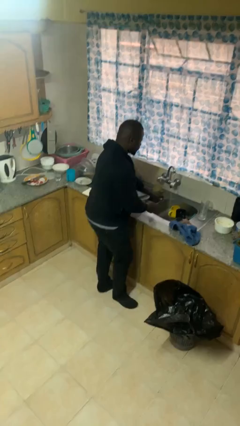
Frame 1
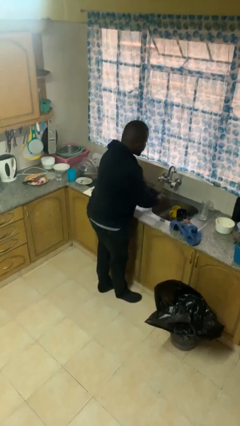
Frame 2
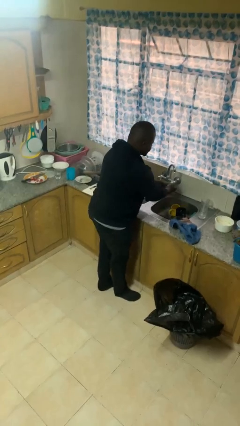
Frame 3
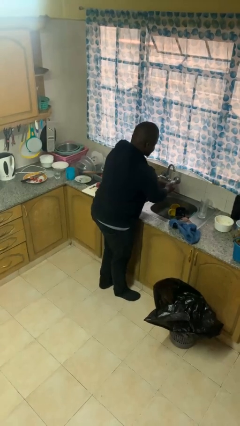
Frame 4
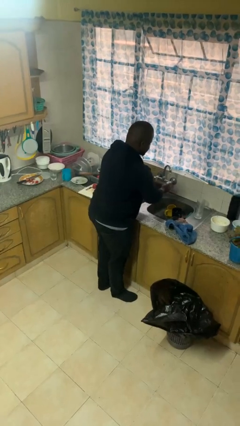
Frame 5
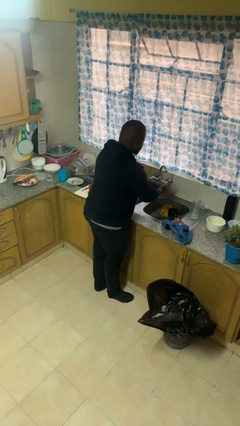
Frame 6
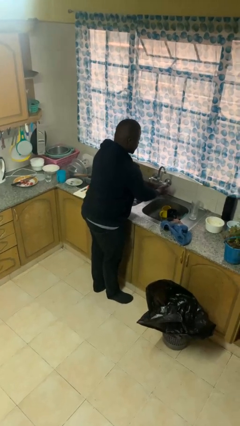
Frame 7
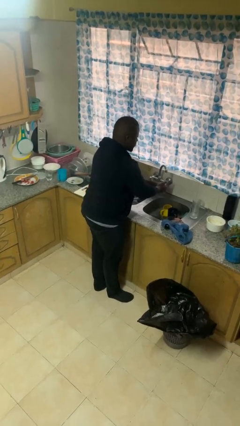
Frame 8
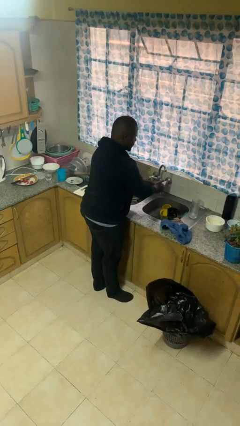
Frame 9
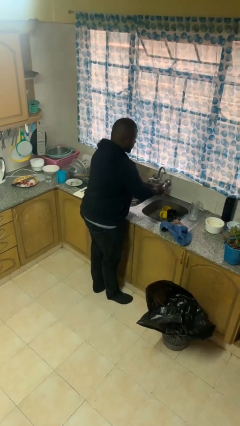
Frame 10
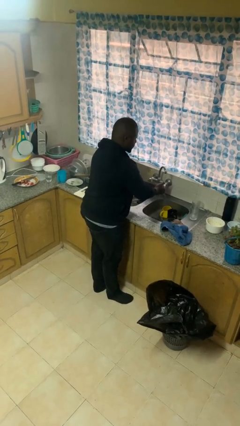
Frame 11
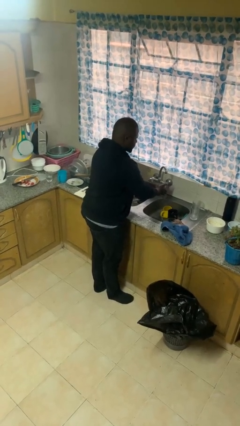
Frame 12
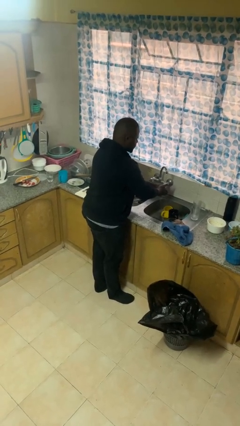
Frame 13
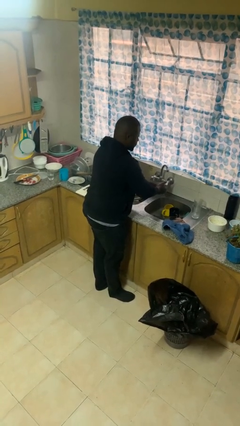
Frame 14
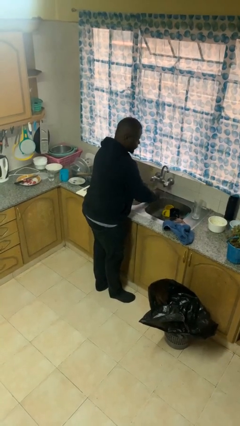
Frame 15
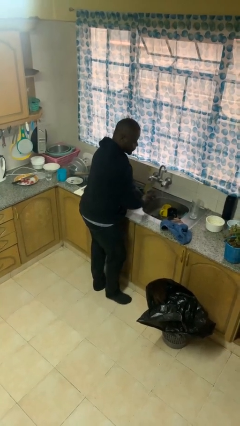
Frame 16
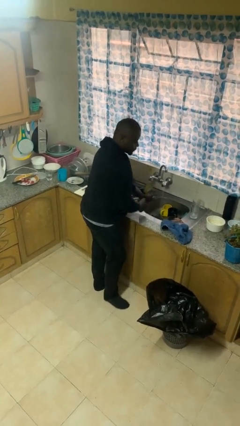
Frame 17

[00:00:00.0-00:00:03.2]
person washes hands

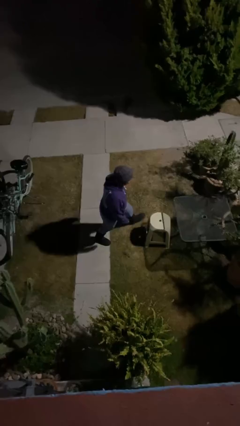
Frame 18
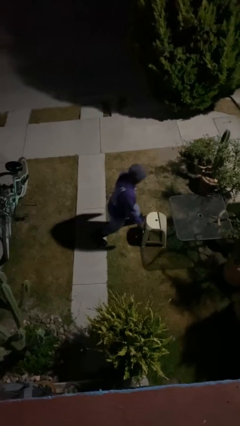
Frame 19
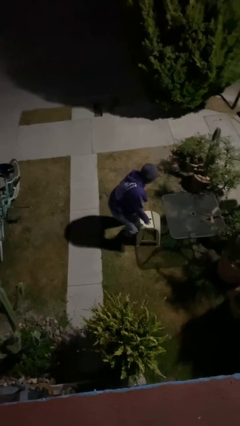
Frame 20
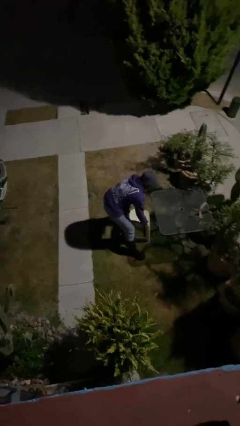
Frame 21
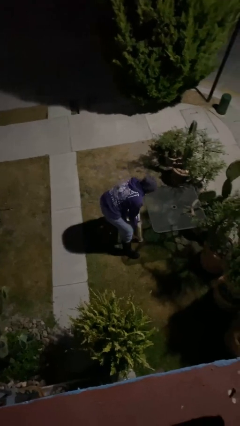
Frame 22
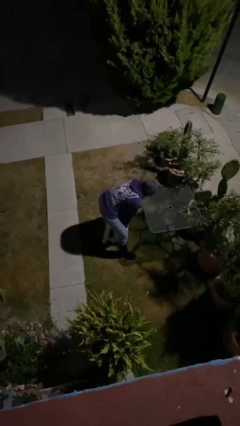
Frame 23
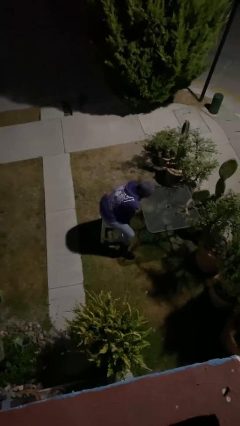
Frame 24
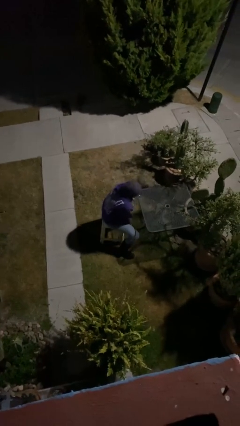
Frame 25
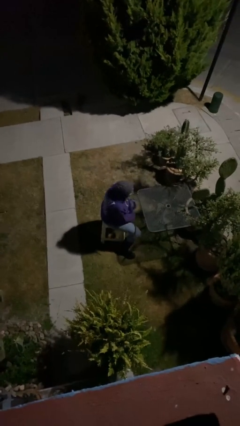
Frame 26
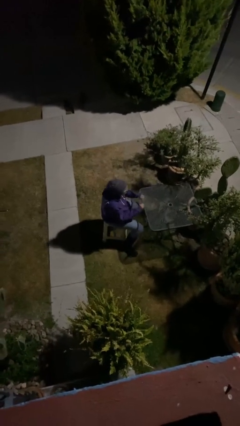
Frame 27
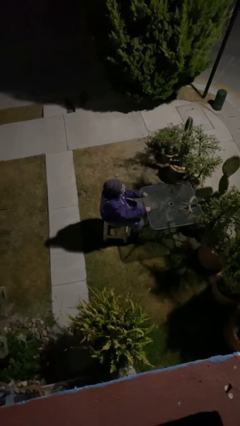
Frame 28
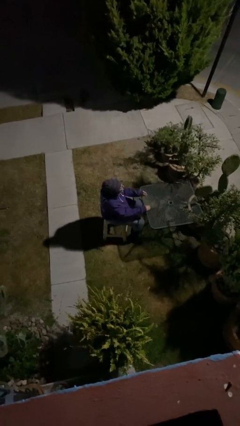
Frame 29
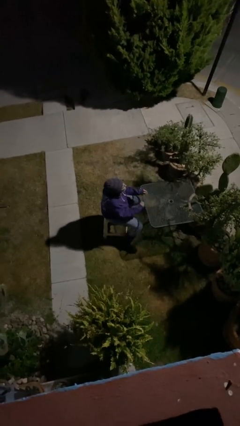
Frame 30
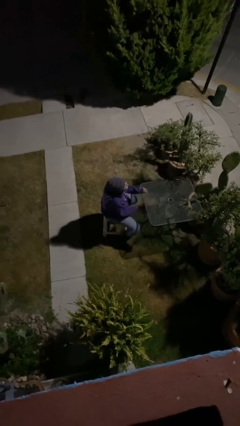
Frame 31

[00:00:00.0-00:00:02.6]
person sits down

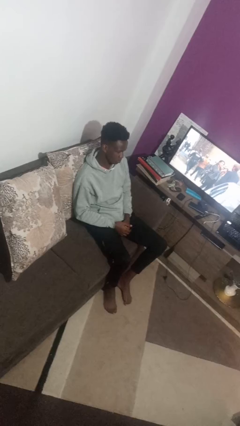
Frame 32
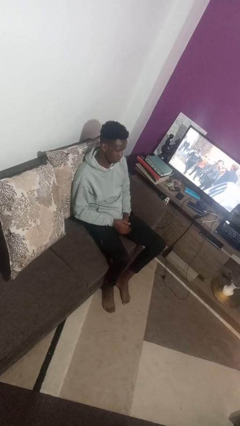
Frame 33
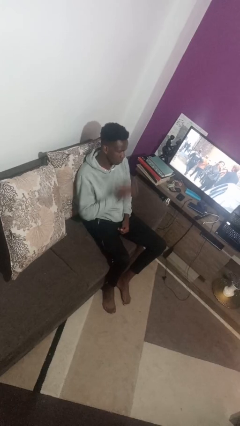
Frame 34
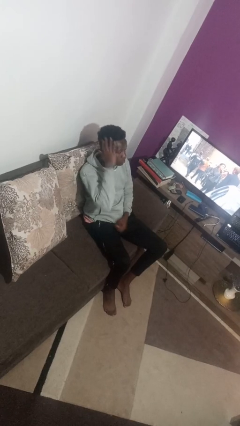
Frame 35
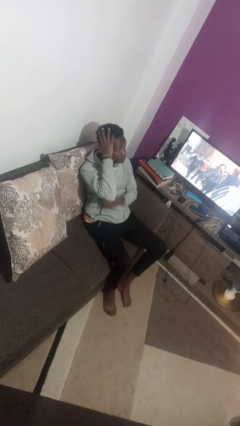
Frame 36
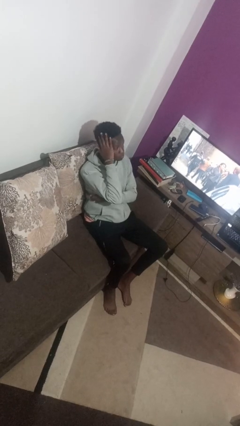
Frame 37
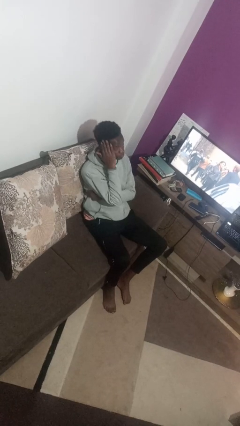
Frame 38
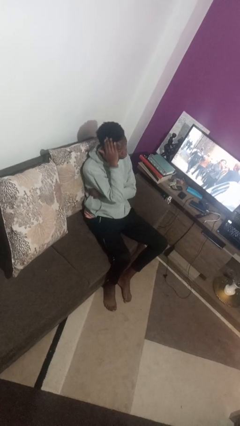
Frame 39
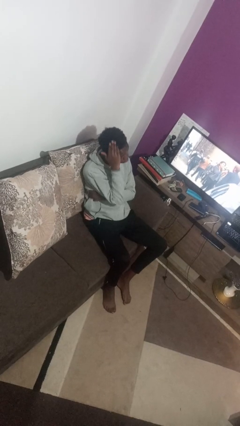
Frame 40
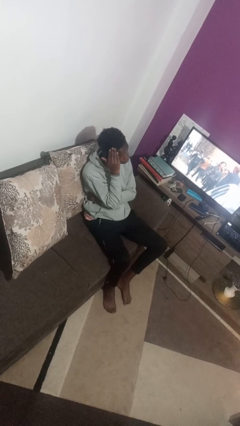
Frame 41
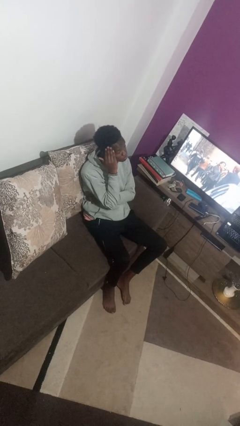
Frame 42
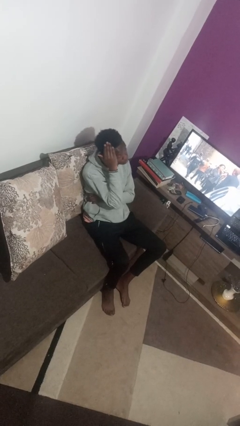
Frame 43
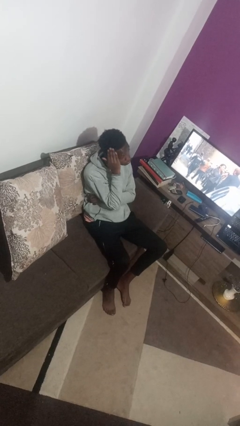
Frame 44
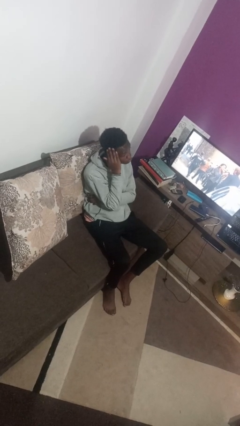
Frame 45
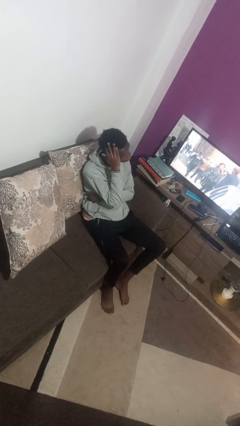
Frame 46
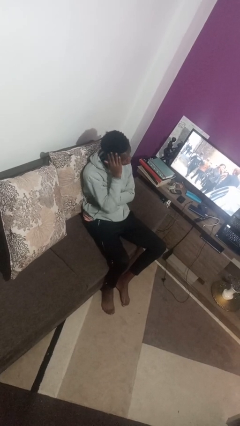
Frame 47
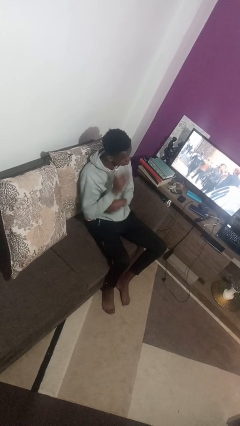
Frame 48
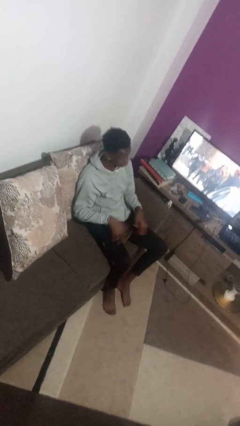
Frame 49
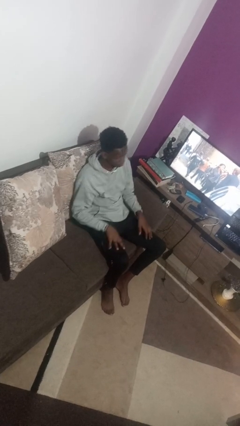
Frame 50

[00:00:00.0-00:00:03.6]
person strokes hair

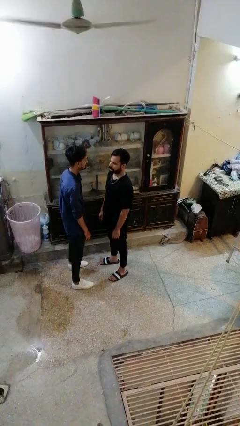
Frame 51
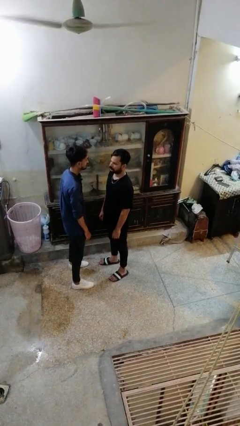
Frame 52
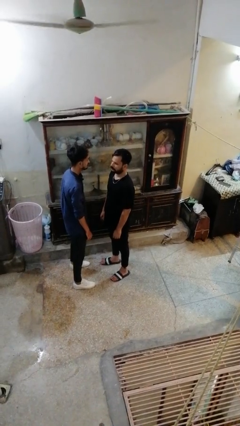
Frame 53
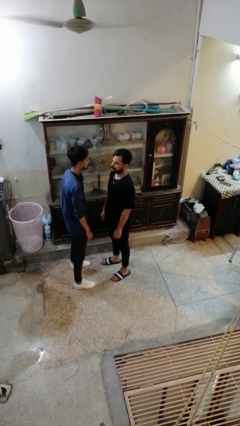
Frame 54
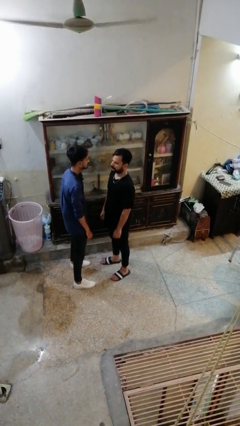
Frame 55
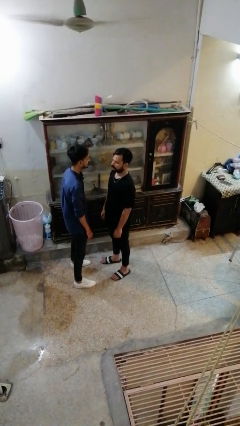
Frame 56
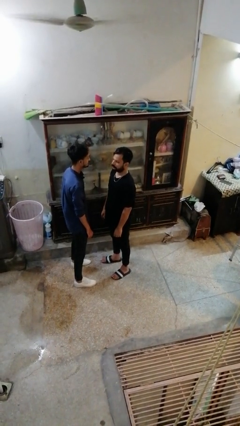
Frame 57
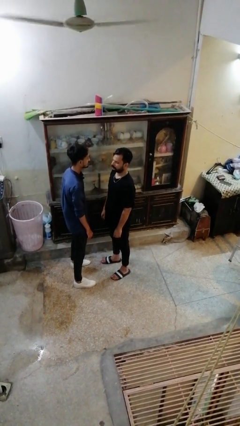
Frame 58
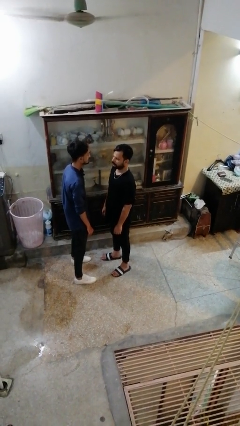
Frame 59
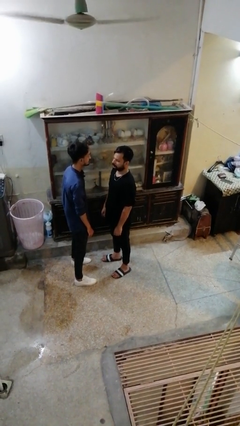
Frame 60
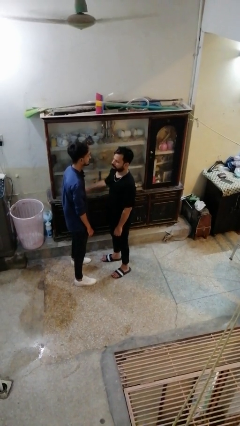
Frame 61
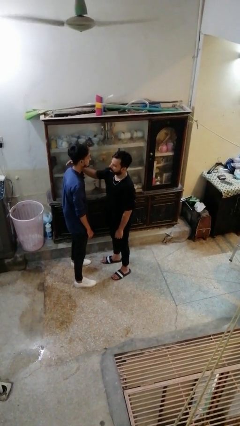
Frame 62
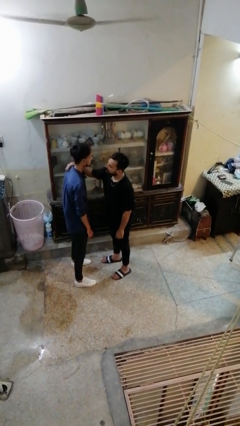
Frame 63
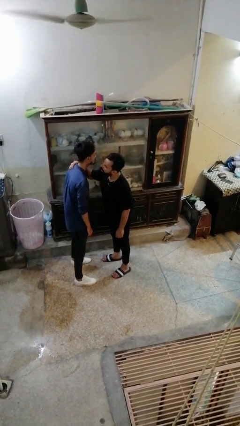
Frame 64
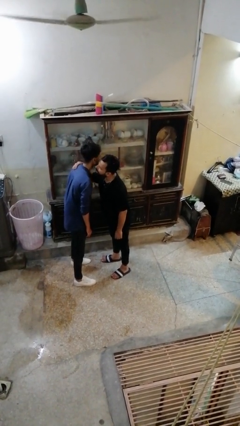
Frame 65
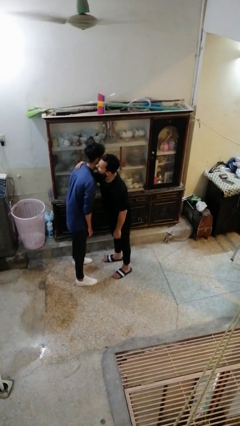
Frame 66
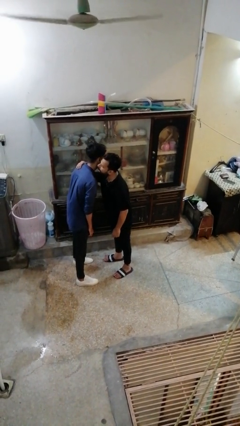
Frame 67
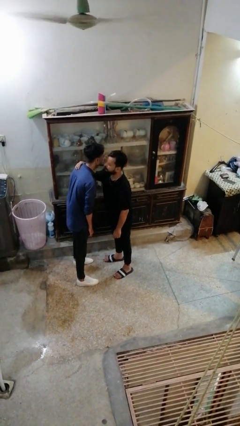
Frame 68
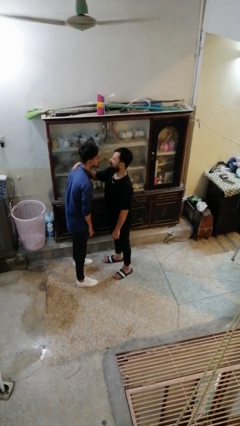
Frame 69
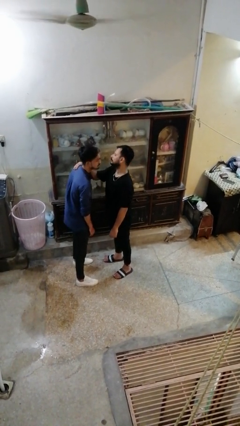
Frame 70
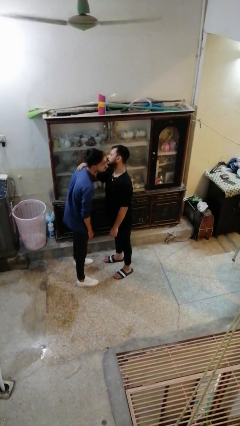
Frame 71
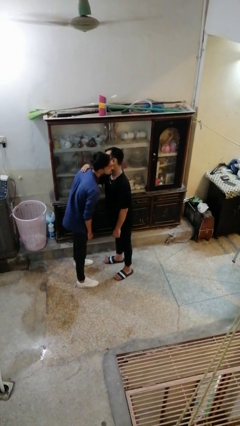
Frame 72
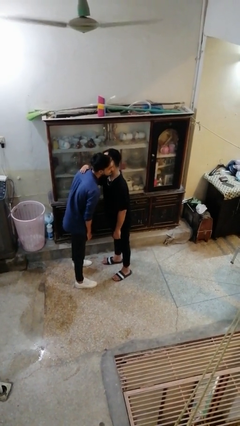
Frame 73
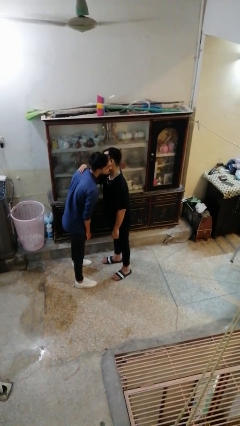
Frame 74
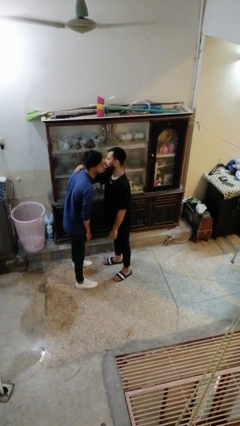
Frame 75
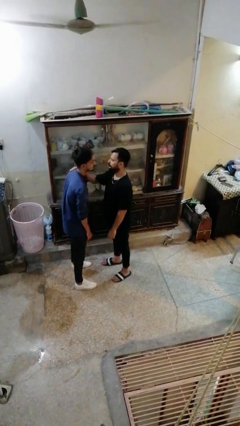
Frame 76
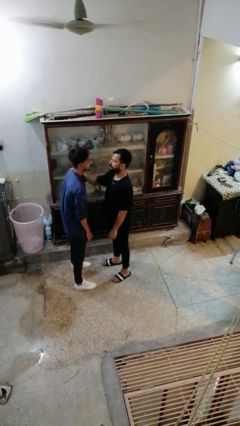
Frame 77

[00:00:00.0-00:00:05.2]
person kisses cheek of person

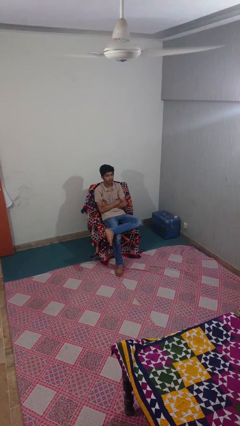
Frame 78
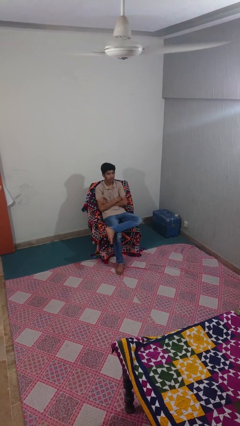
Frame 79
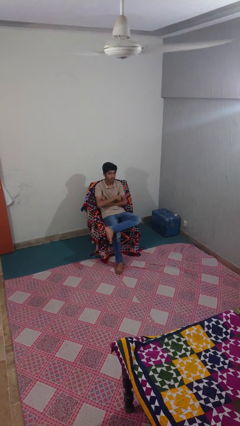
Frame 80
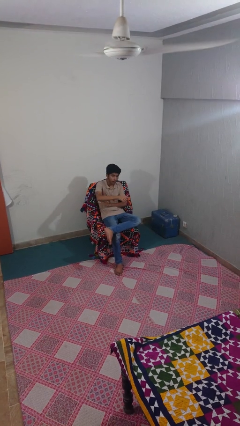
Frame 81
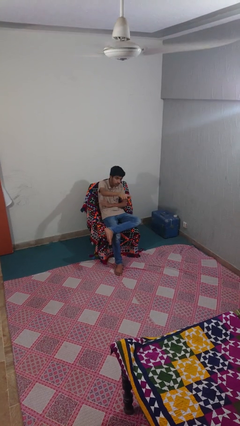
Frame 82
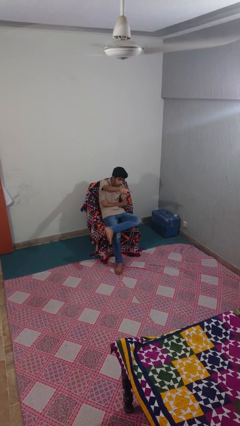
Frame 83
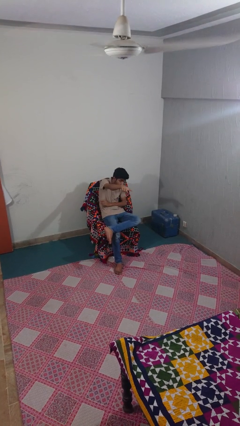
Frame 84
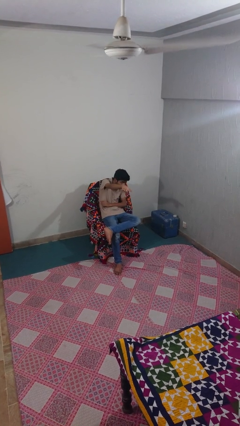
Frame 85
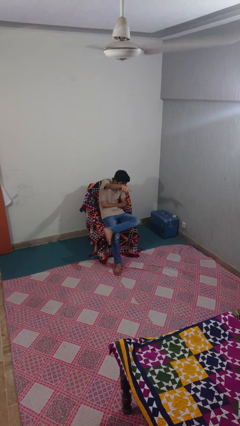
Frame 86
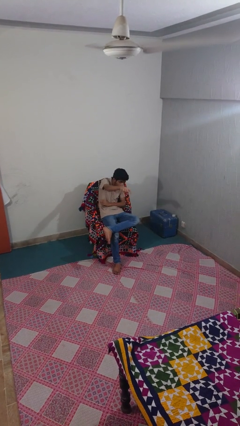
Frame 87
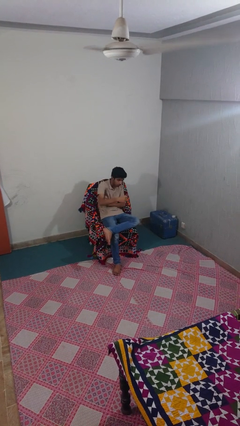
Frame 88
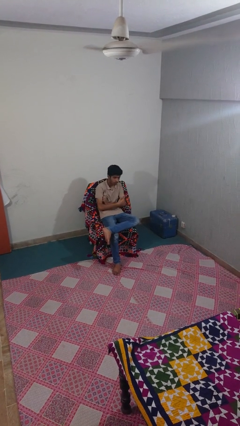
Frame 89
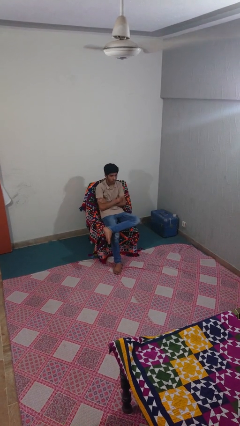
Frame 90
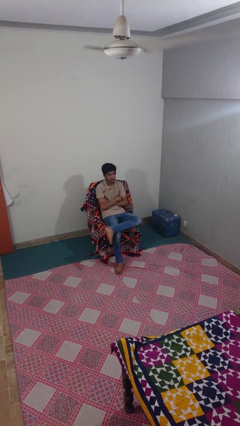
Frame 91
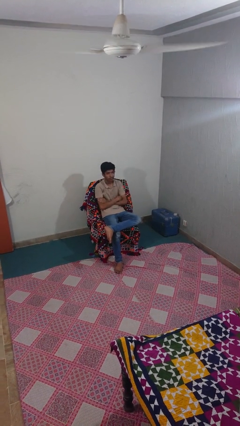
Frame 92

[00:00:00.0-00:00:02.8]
person points at person
